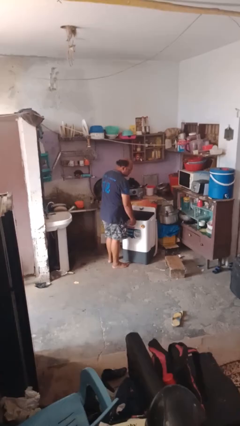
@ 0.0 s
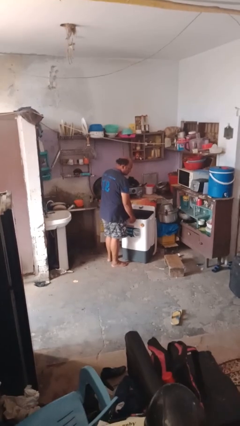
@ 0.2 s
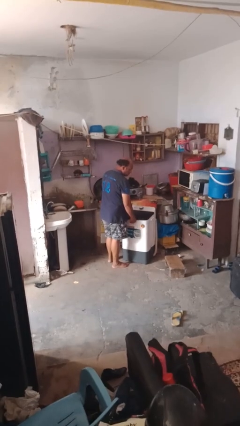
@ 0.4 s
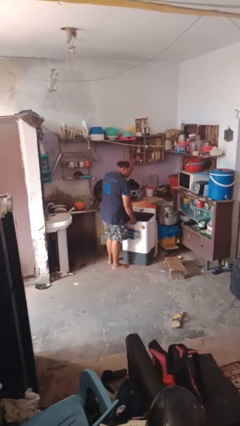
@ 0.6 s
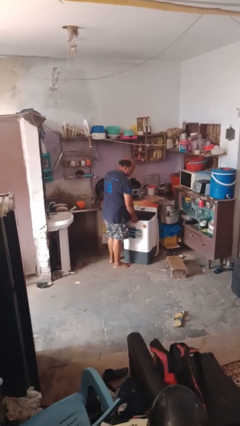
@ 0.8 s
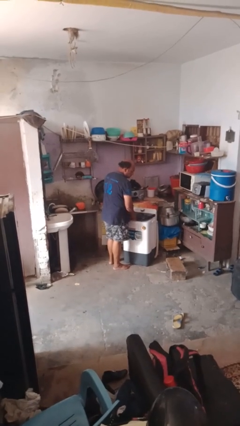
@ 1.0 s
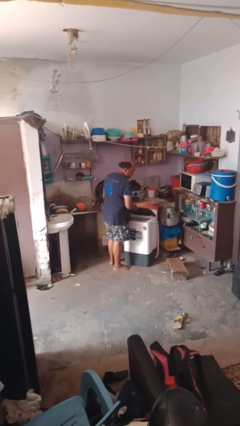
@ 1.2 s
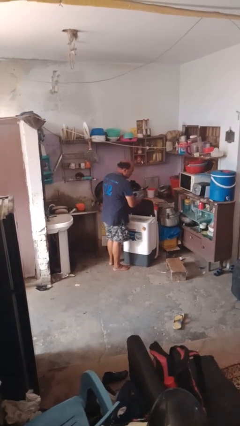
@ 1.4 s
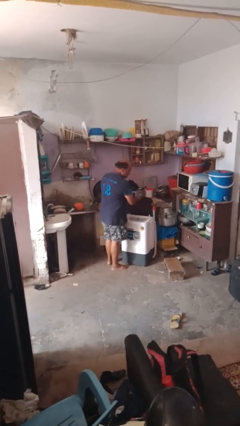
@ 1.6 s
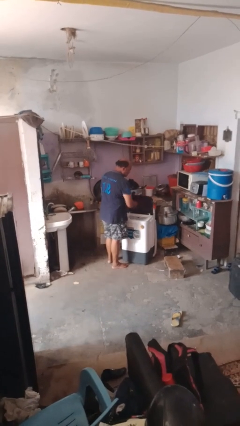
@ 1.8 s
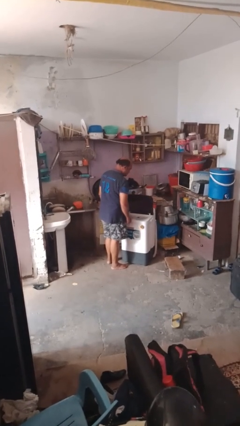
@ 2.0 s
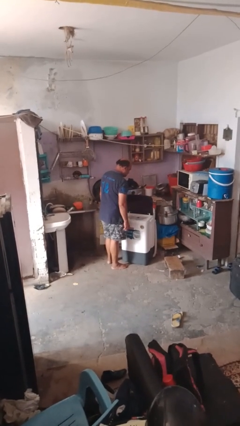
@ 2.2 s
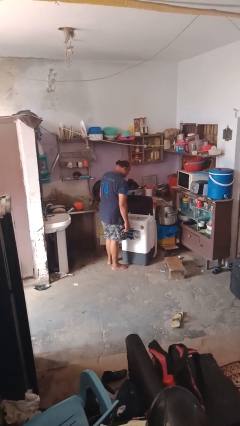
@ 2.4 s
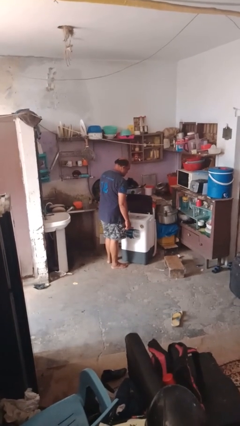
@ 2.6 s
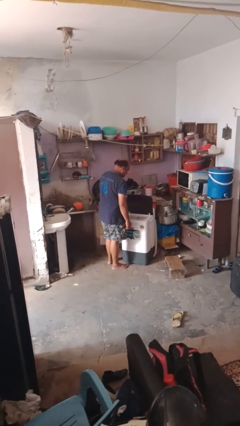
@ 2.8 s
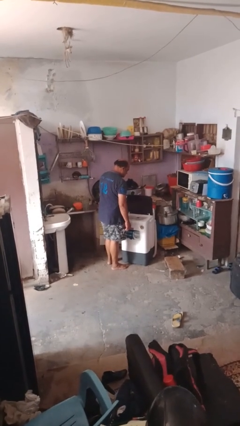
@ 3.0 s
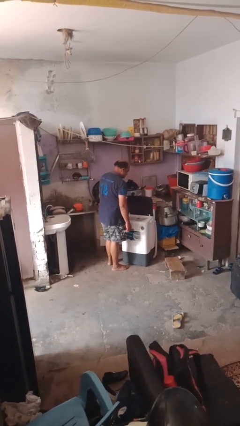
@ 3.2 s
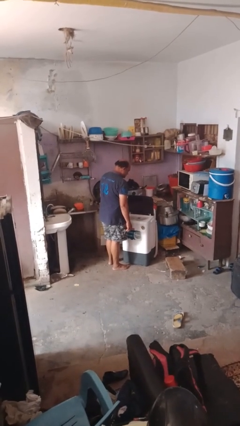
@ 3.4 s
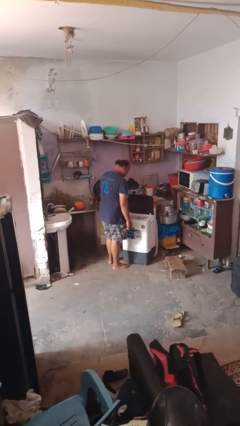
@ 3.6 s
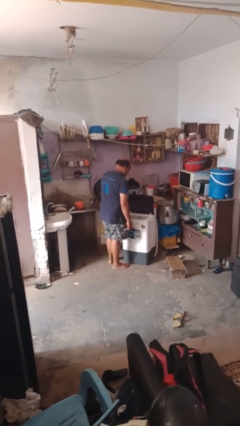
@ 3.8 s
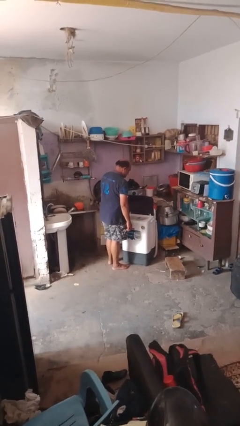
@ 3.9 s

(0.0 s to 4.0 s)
person opens clothes washer

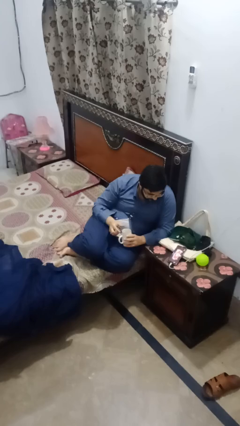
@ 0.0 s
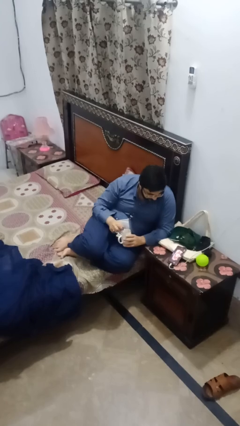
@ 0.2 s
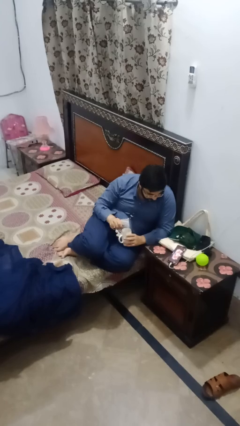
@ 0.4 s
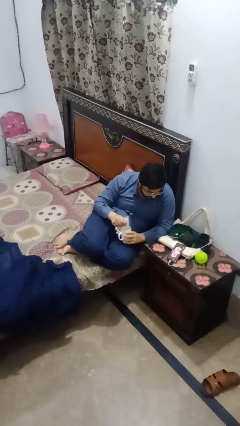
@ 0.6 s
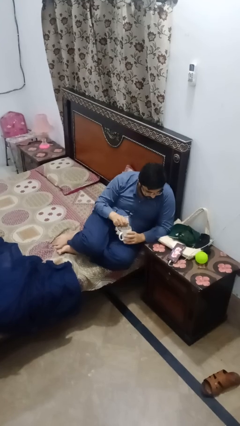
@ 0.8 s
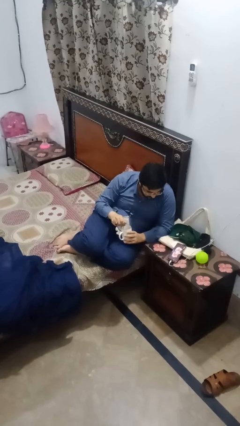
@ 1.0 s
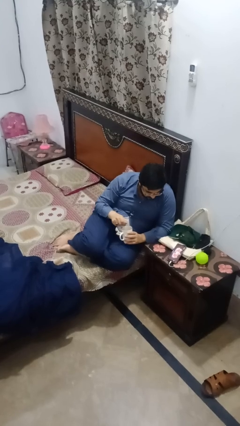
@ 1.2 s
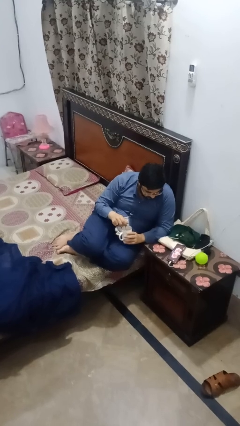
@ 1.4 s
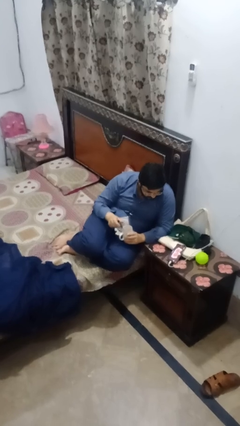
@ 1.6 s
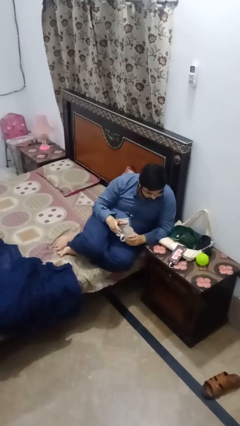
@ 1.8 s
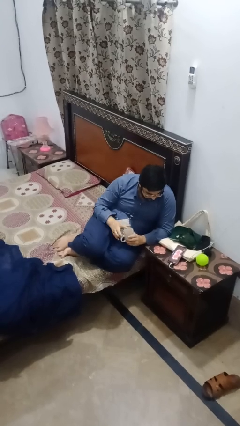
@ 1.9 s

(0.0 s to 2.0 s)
person stirs mug

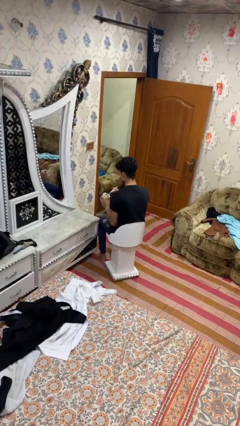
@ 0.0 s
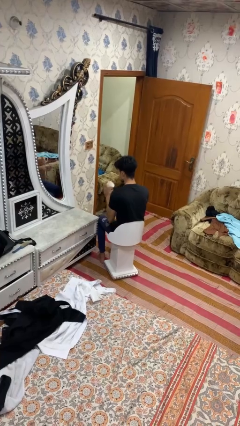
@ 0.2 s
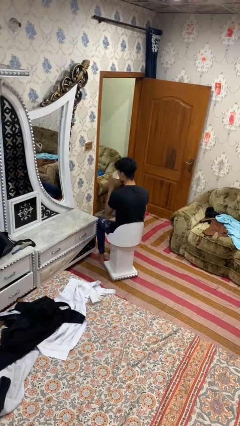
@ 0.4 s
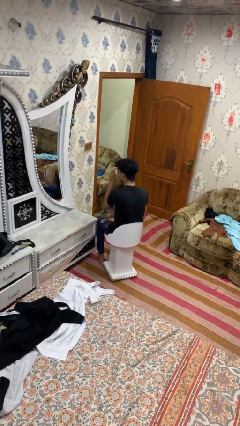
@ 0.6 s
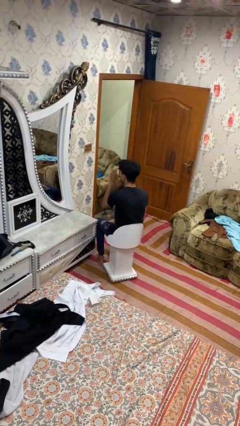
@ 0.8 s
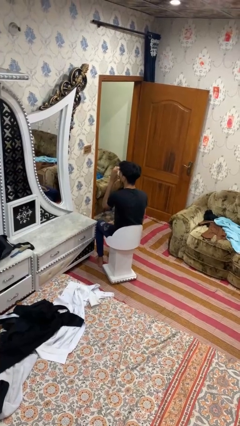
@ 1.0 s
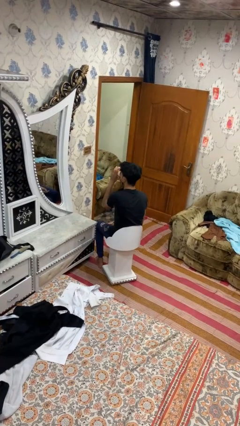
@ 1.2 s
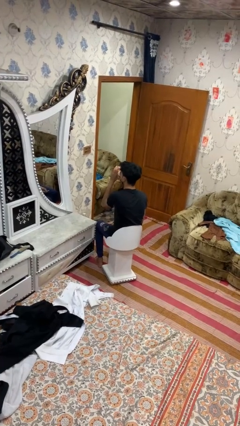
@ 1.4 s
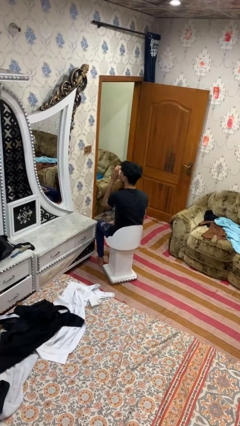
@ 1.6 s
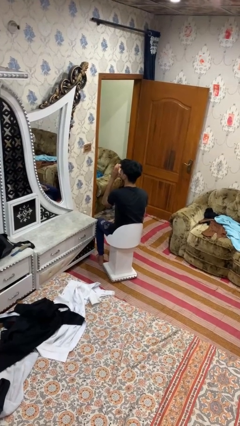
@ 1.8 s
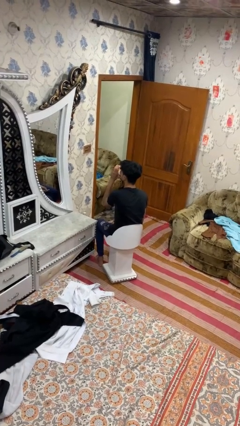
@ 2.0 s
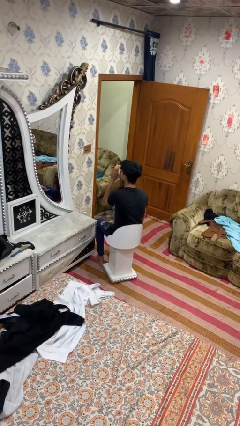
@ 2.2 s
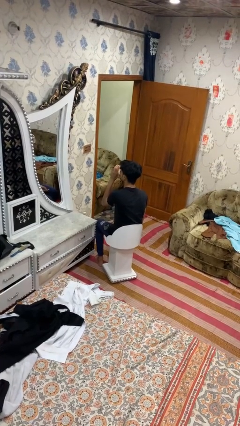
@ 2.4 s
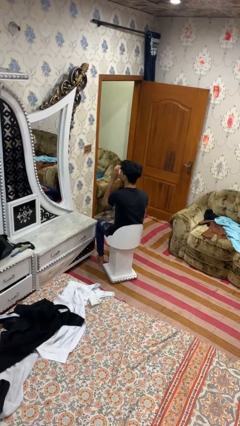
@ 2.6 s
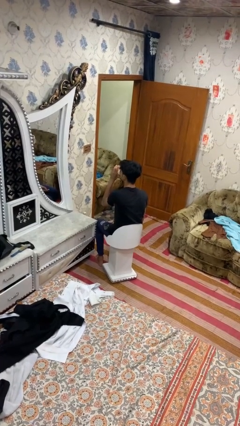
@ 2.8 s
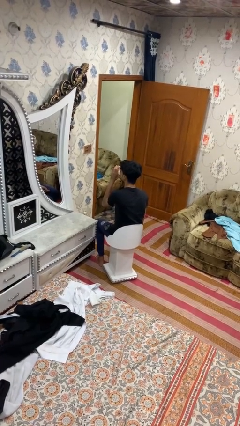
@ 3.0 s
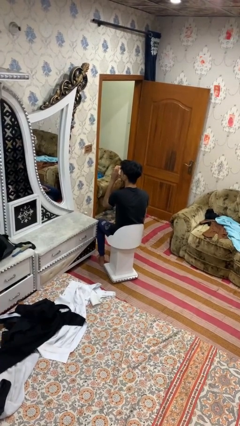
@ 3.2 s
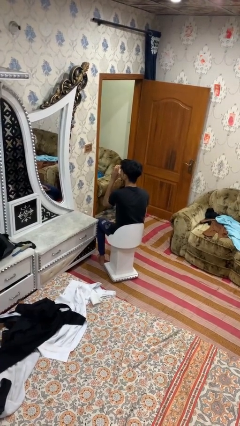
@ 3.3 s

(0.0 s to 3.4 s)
person drinks from mug

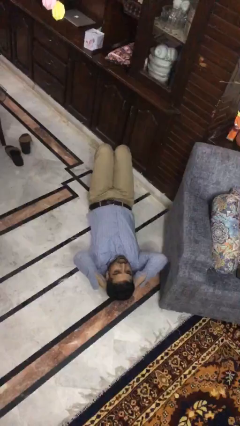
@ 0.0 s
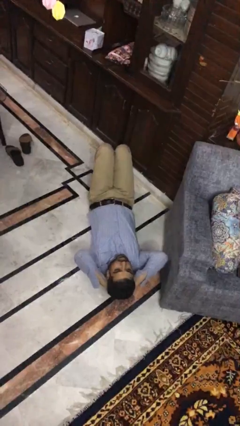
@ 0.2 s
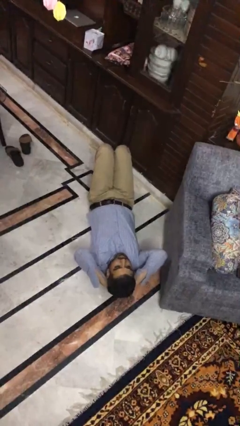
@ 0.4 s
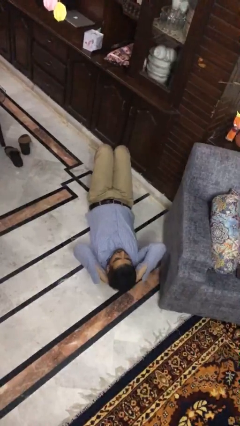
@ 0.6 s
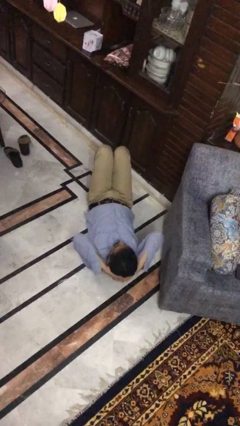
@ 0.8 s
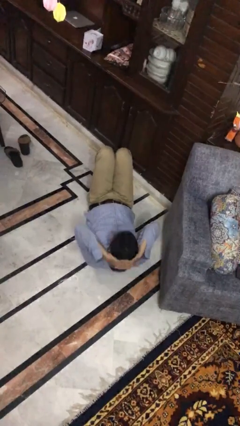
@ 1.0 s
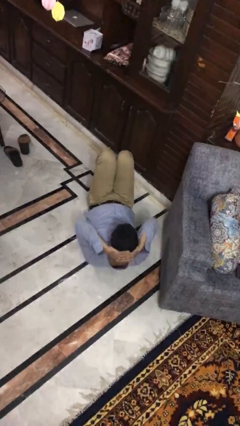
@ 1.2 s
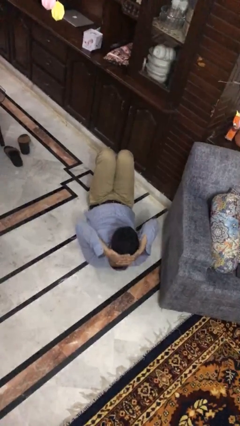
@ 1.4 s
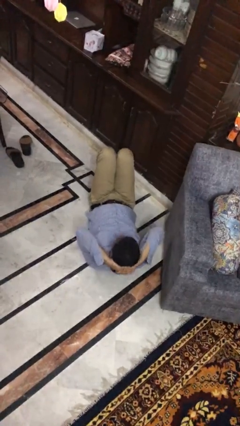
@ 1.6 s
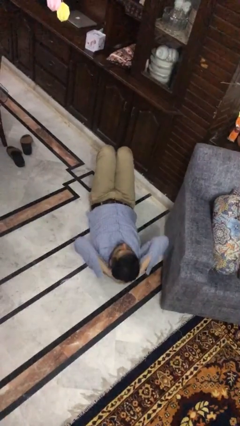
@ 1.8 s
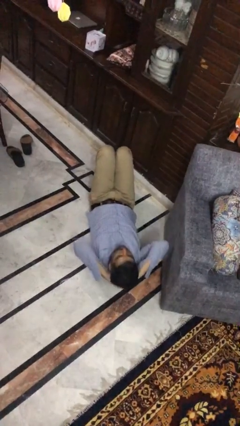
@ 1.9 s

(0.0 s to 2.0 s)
person exercises with situp

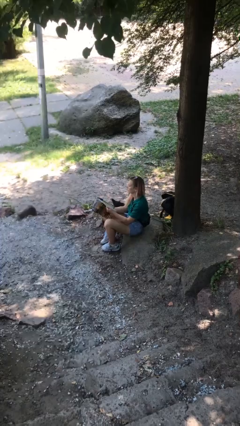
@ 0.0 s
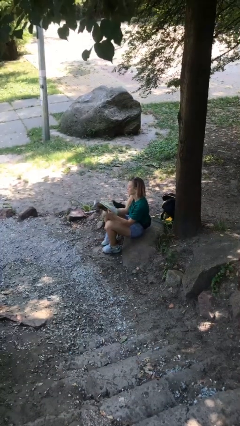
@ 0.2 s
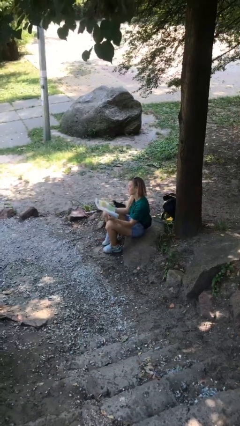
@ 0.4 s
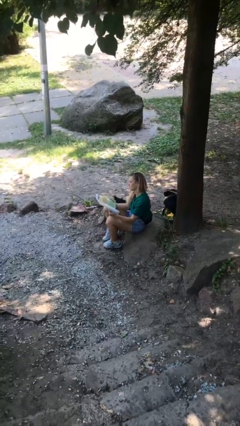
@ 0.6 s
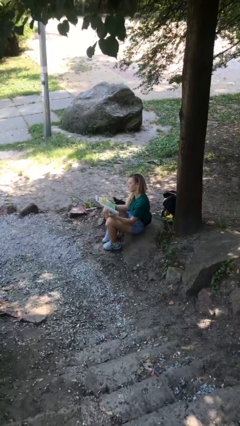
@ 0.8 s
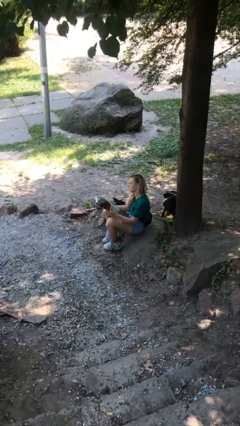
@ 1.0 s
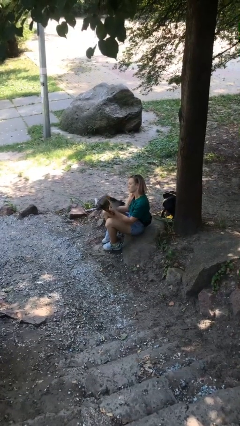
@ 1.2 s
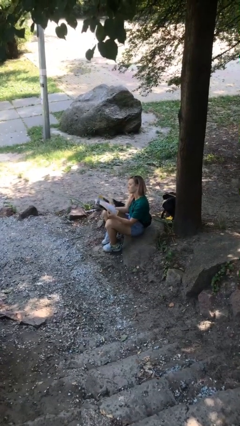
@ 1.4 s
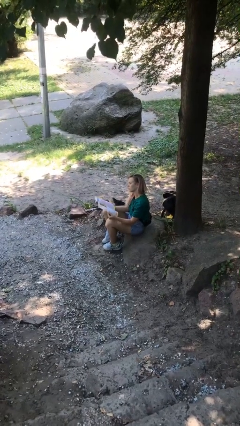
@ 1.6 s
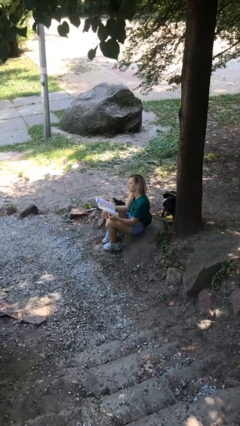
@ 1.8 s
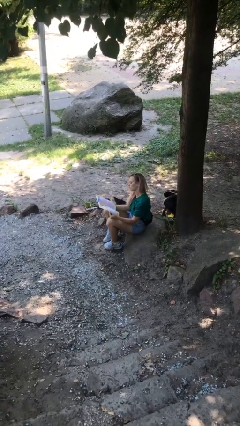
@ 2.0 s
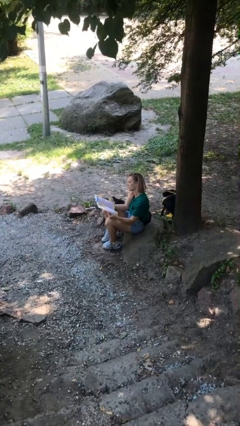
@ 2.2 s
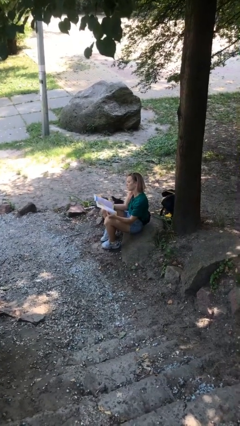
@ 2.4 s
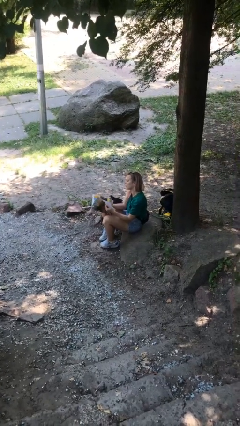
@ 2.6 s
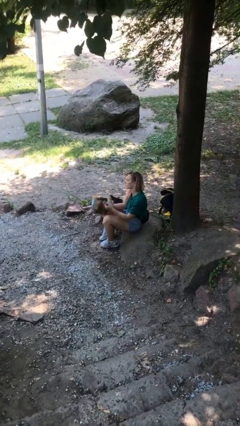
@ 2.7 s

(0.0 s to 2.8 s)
person reads magazine

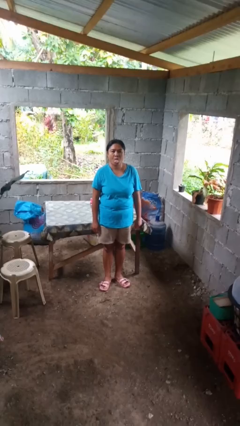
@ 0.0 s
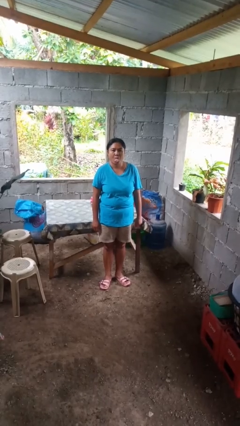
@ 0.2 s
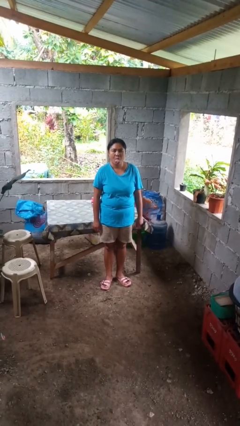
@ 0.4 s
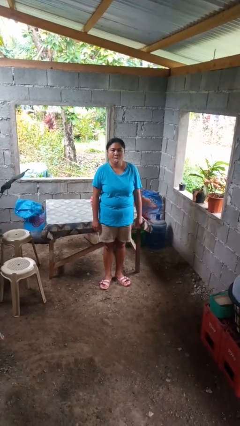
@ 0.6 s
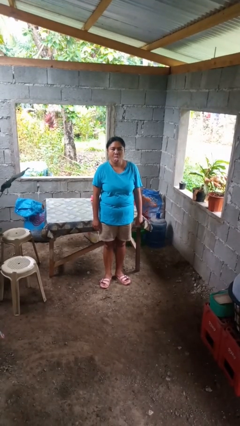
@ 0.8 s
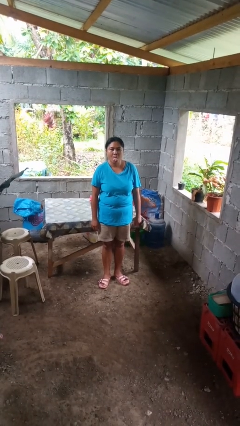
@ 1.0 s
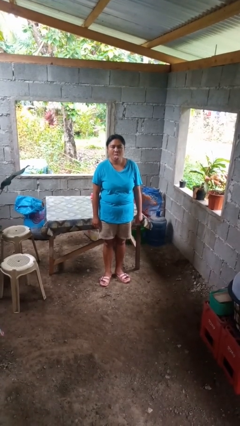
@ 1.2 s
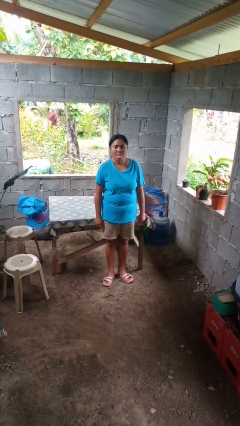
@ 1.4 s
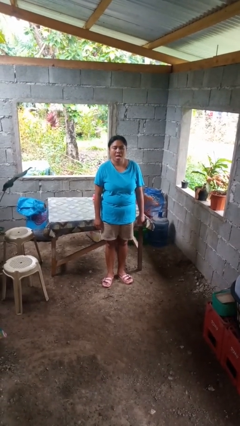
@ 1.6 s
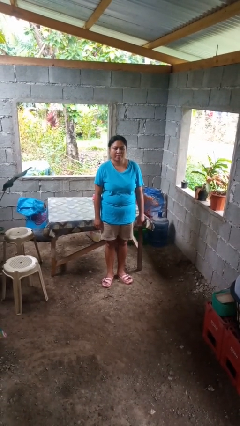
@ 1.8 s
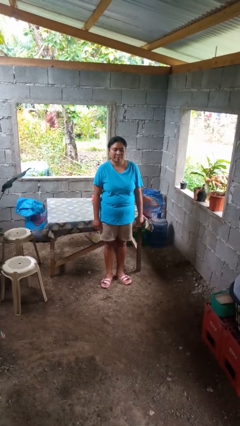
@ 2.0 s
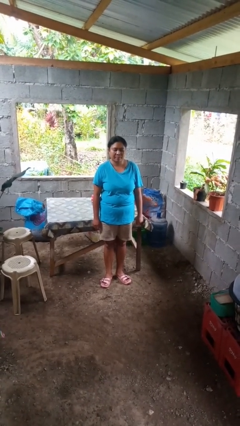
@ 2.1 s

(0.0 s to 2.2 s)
person sticks out tongue

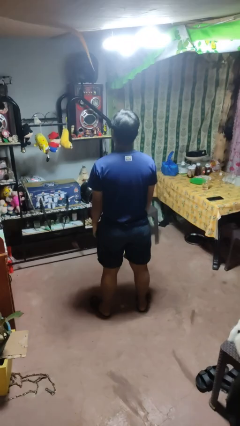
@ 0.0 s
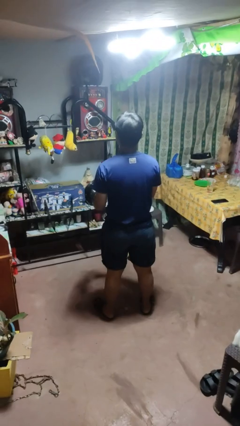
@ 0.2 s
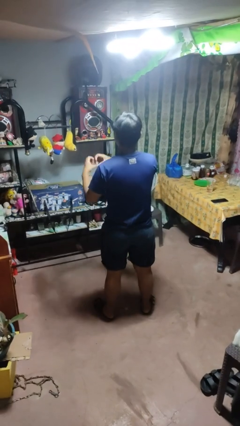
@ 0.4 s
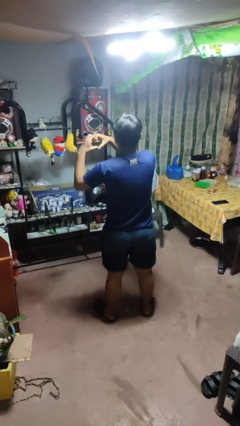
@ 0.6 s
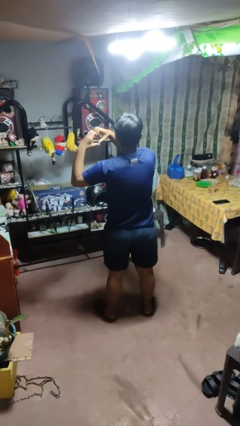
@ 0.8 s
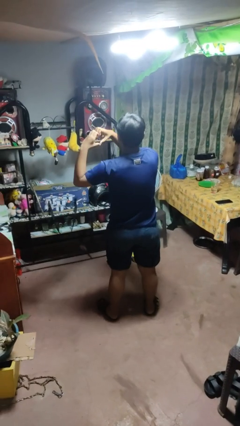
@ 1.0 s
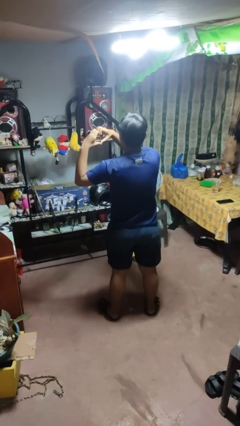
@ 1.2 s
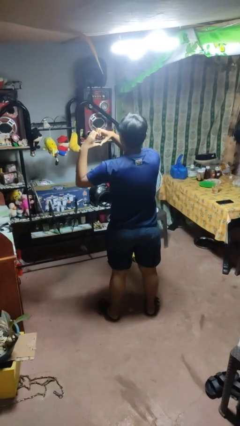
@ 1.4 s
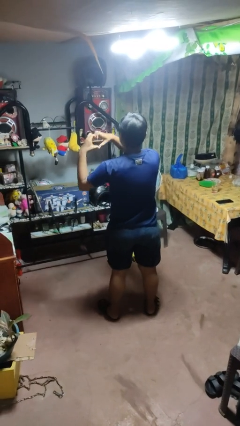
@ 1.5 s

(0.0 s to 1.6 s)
person gestures heart
